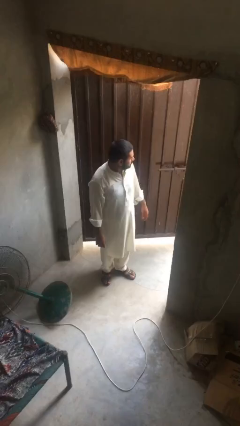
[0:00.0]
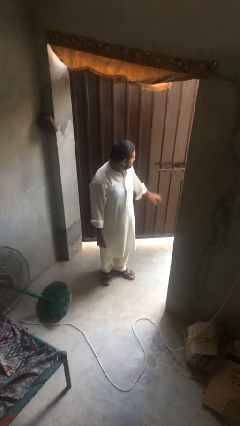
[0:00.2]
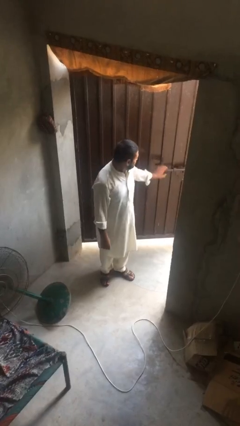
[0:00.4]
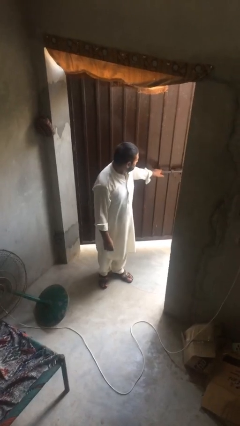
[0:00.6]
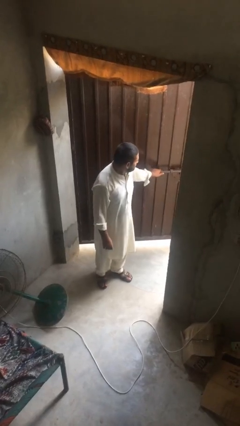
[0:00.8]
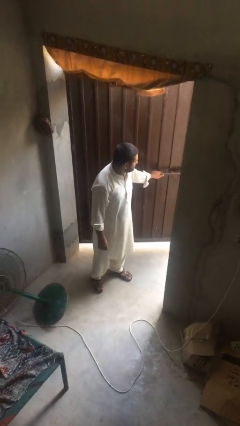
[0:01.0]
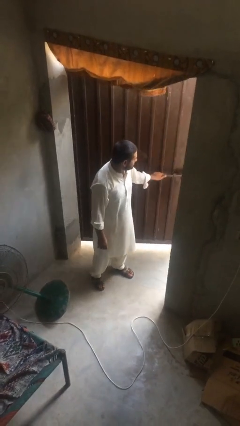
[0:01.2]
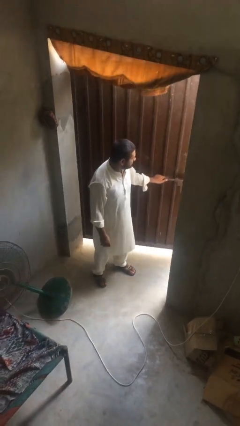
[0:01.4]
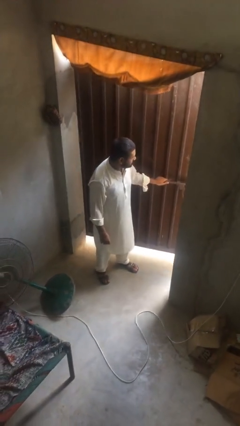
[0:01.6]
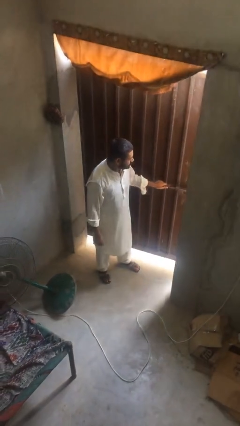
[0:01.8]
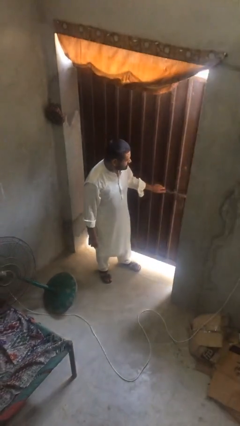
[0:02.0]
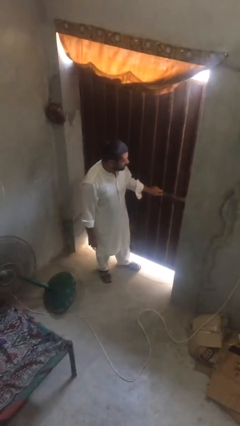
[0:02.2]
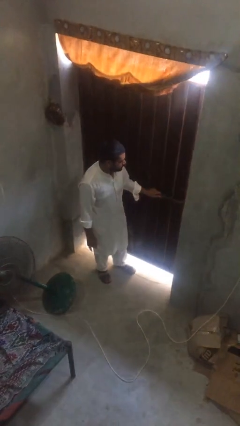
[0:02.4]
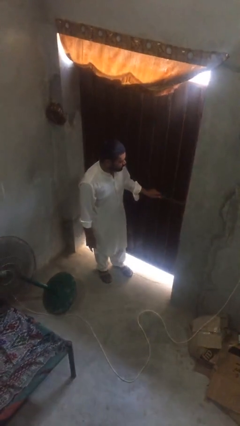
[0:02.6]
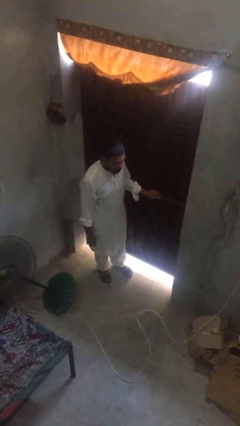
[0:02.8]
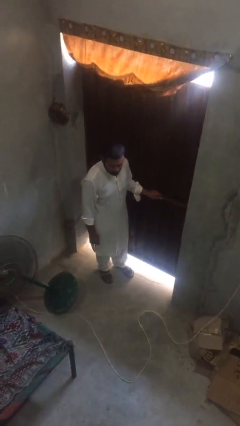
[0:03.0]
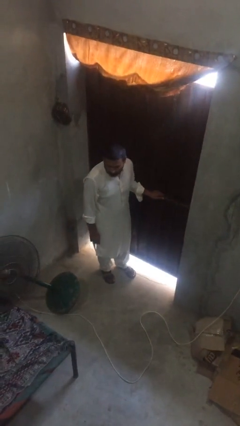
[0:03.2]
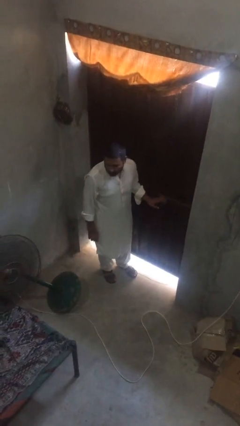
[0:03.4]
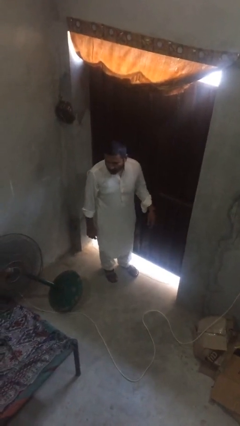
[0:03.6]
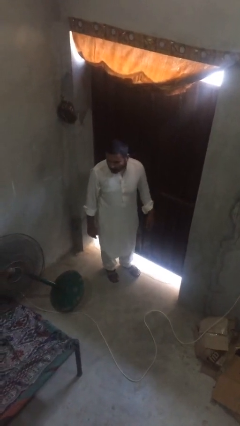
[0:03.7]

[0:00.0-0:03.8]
person closes facility door

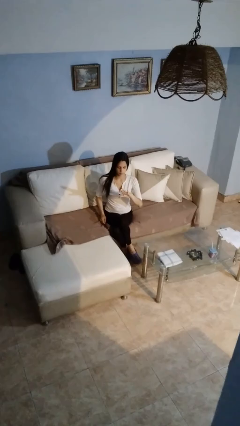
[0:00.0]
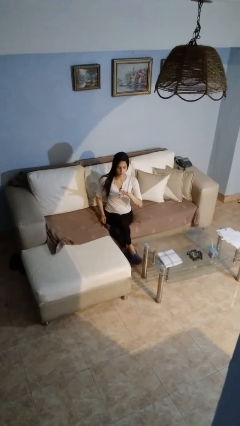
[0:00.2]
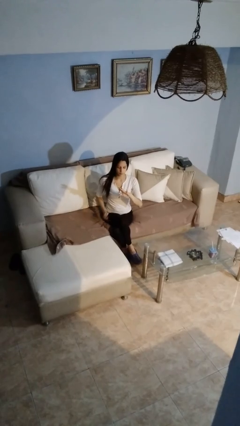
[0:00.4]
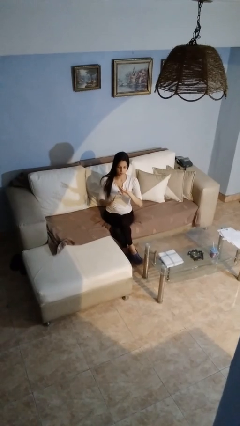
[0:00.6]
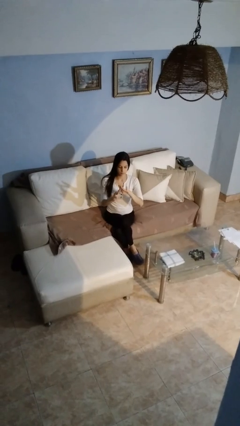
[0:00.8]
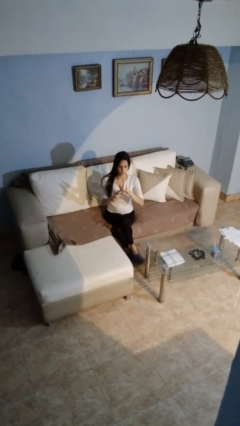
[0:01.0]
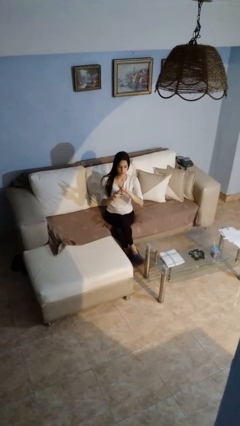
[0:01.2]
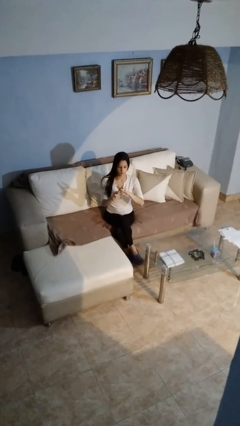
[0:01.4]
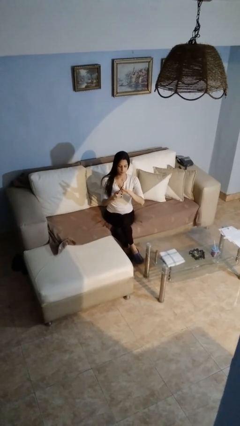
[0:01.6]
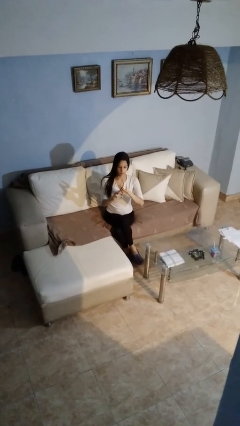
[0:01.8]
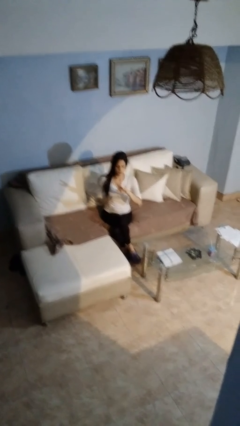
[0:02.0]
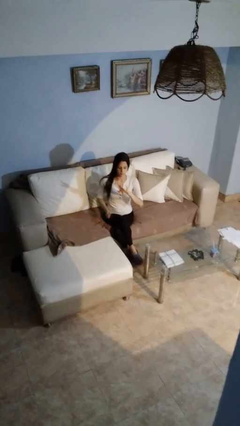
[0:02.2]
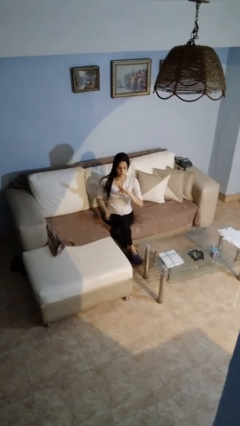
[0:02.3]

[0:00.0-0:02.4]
person files fingernails

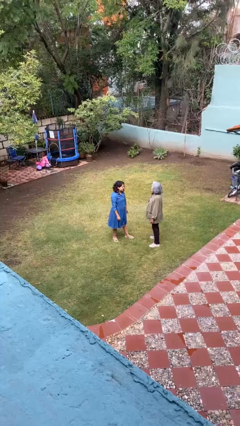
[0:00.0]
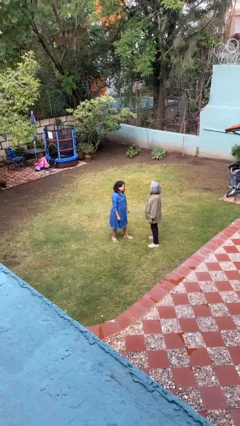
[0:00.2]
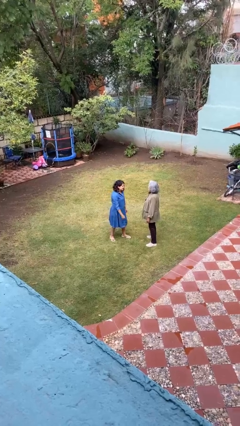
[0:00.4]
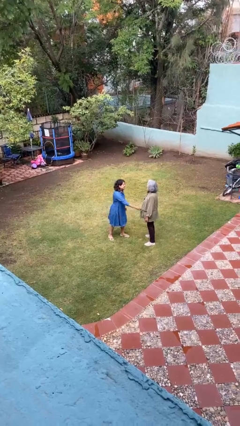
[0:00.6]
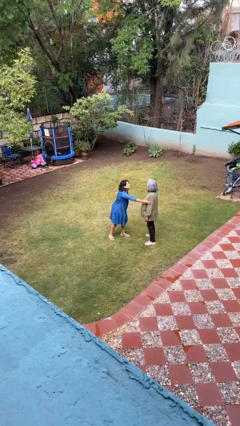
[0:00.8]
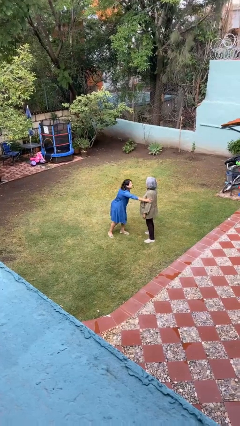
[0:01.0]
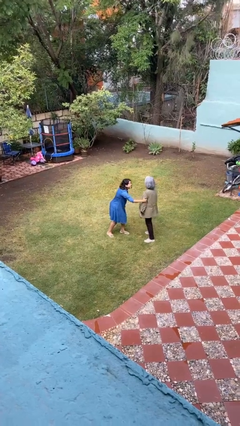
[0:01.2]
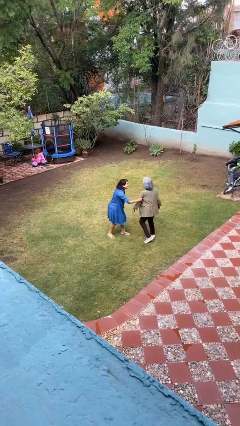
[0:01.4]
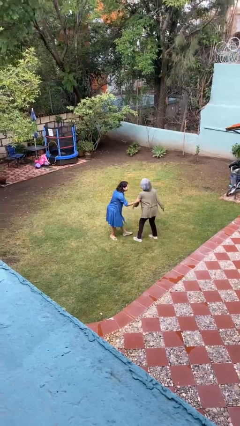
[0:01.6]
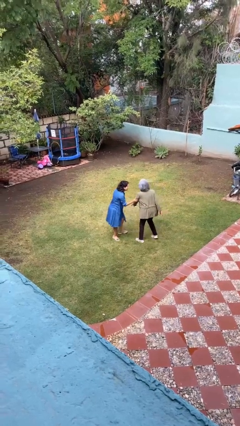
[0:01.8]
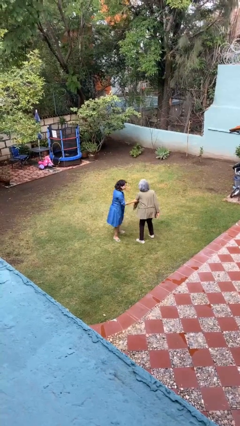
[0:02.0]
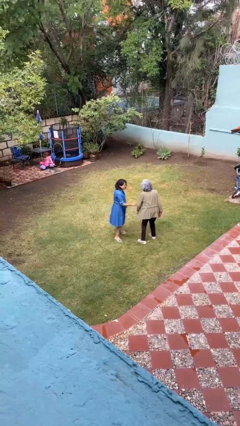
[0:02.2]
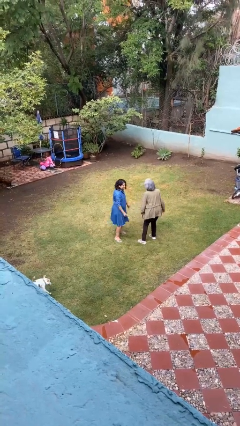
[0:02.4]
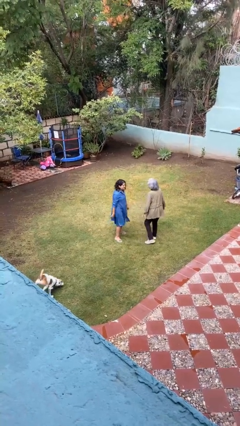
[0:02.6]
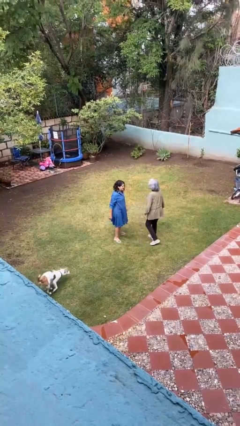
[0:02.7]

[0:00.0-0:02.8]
person grabs person by bicep

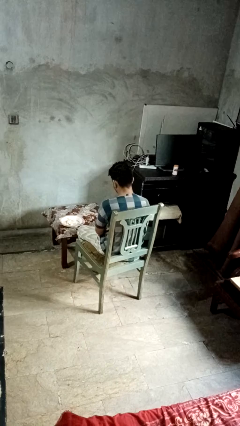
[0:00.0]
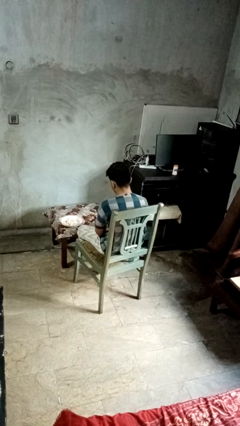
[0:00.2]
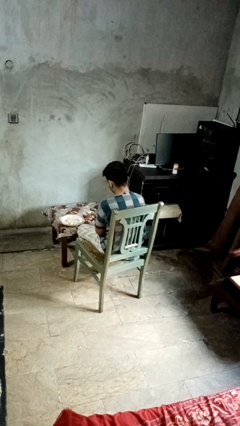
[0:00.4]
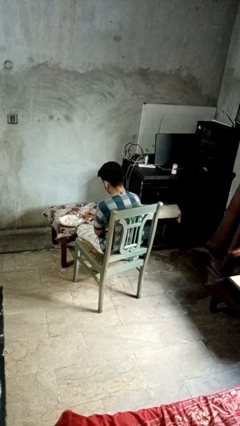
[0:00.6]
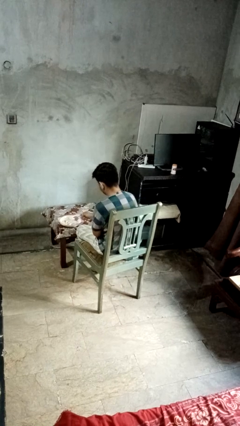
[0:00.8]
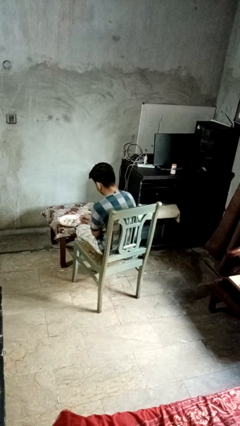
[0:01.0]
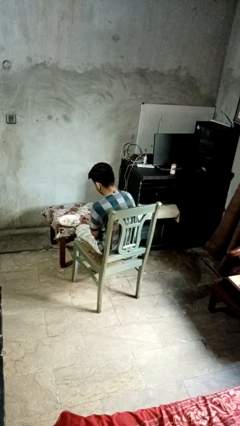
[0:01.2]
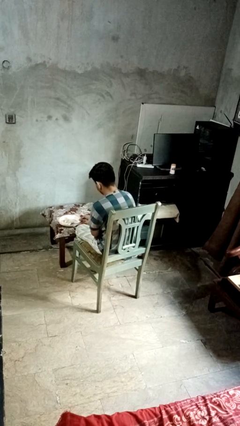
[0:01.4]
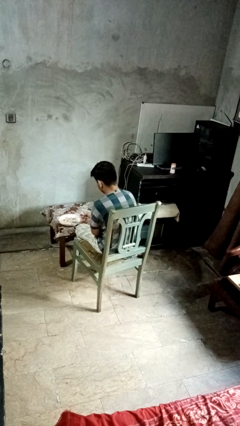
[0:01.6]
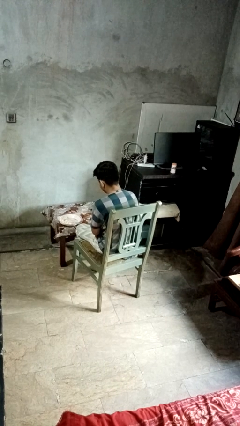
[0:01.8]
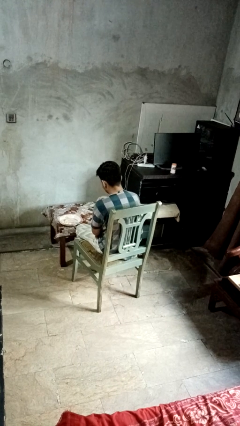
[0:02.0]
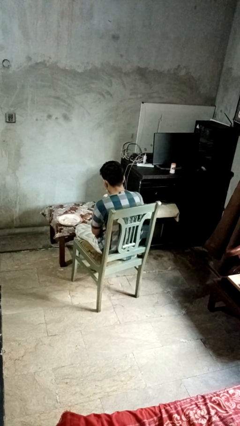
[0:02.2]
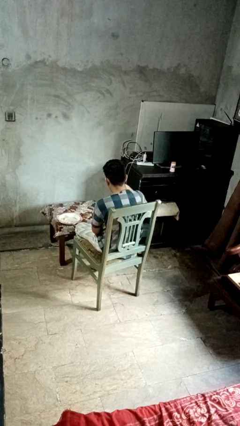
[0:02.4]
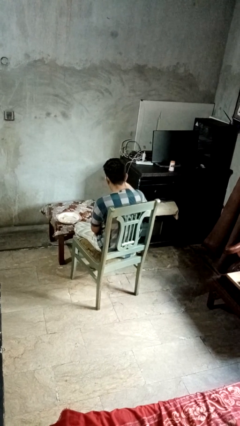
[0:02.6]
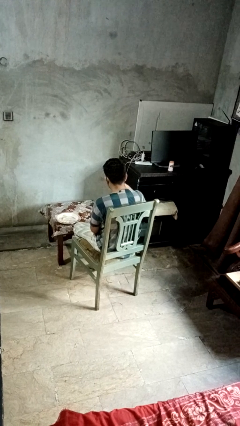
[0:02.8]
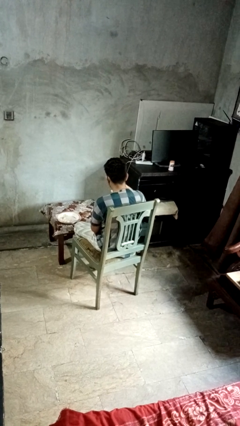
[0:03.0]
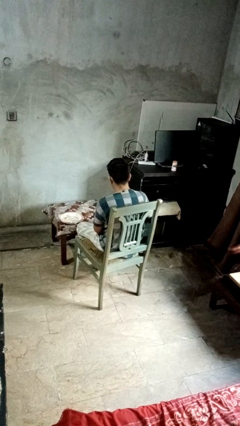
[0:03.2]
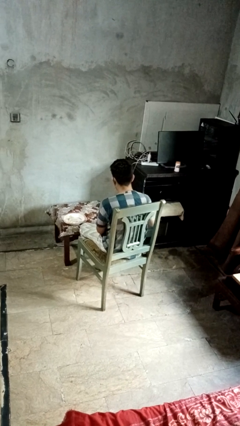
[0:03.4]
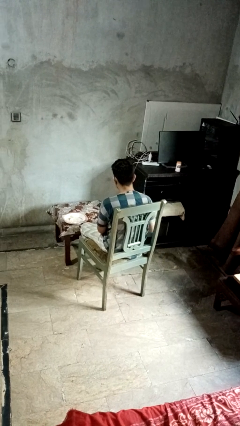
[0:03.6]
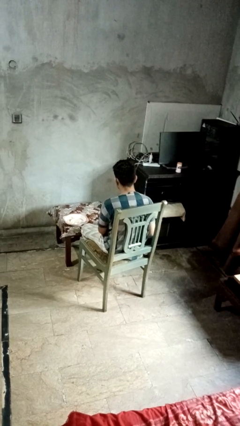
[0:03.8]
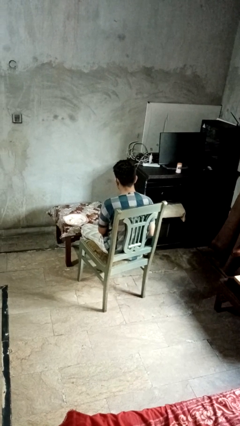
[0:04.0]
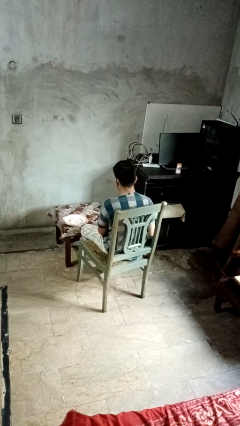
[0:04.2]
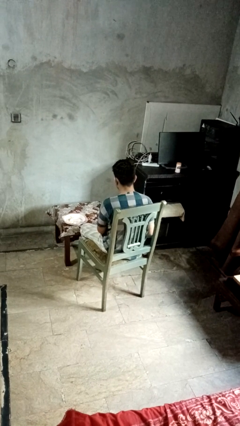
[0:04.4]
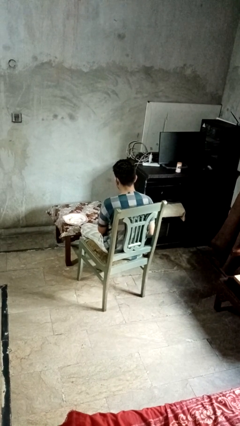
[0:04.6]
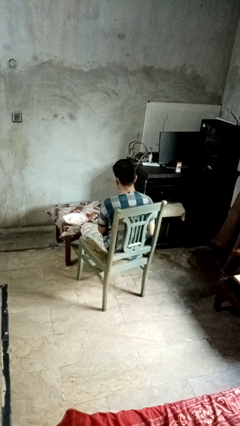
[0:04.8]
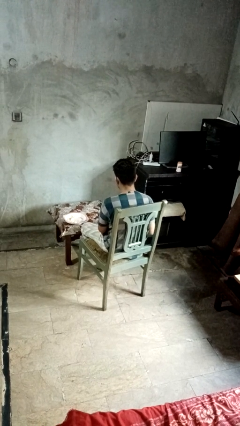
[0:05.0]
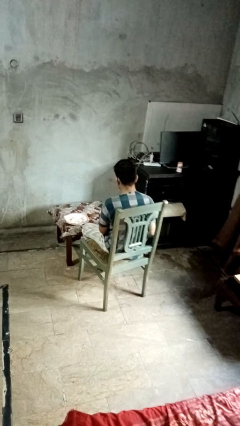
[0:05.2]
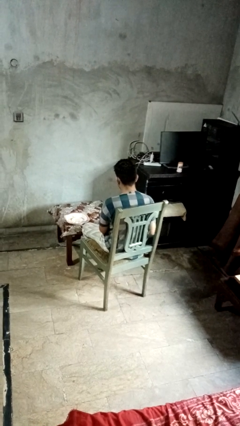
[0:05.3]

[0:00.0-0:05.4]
person eats with utensil

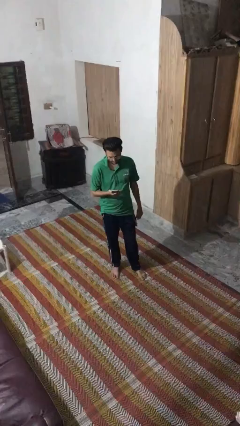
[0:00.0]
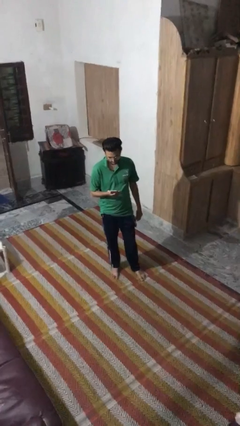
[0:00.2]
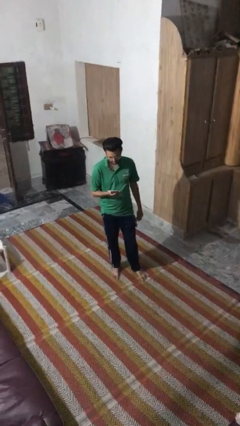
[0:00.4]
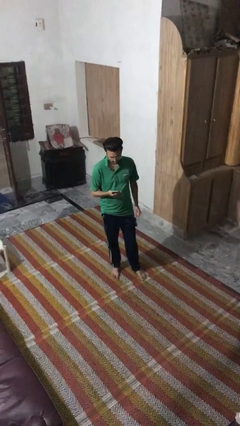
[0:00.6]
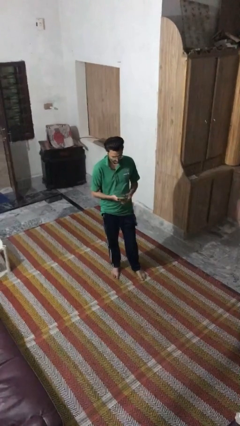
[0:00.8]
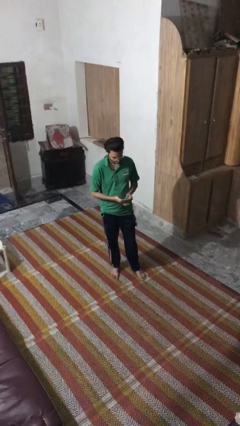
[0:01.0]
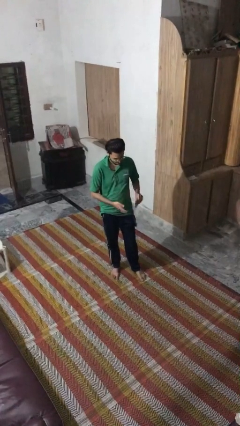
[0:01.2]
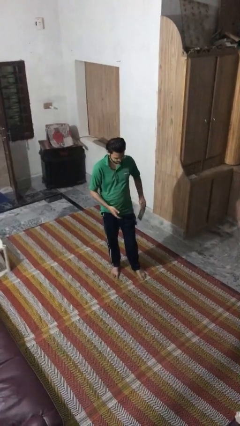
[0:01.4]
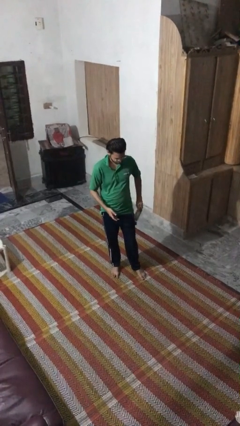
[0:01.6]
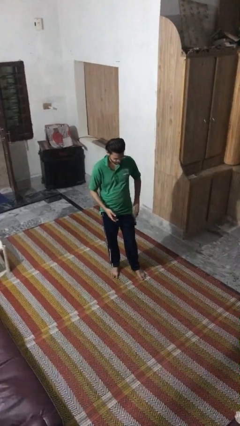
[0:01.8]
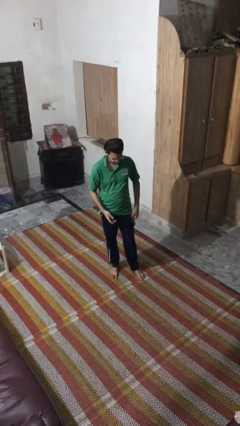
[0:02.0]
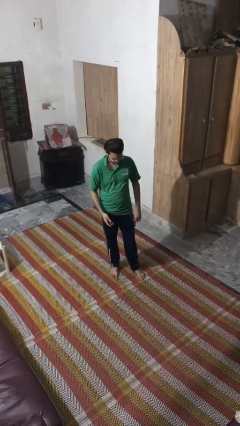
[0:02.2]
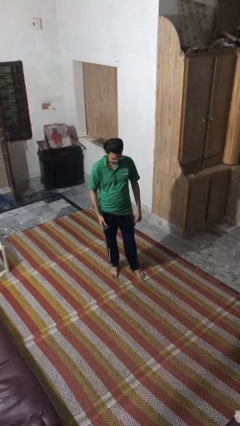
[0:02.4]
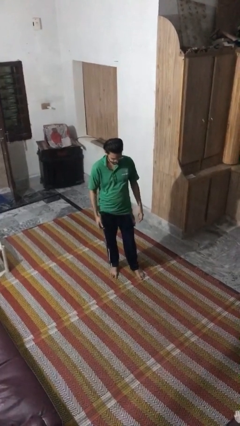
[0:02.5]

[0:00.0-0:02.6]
person puts phone into pocket

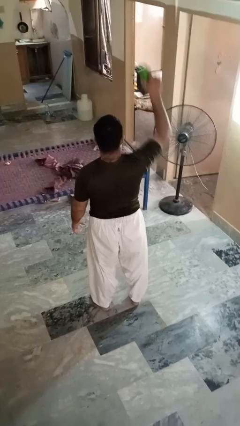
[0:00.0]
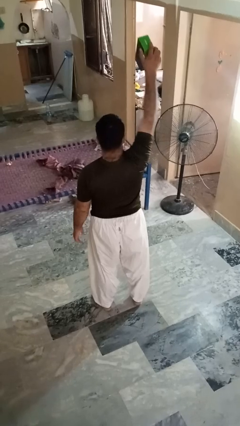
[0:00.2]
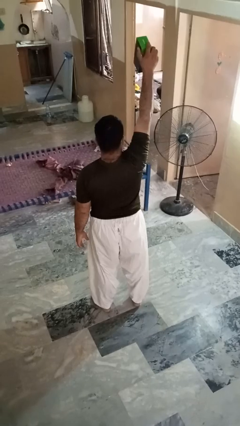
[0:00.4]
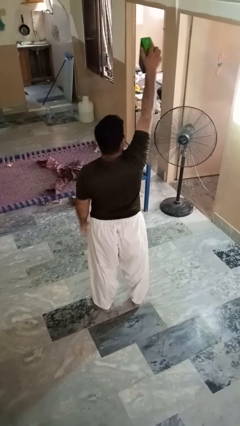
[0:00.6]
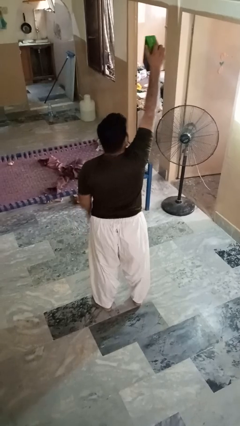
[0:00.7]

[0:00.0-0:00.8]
person drops object
